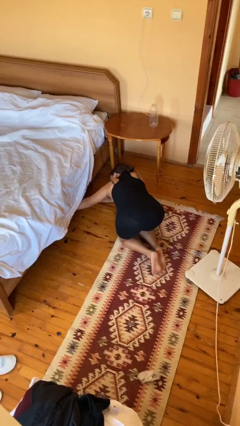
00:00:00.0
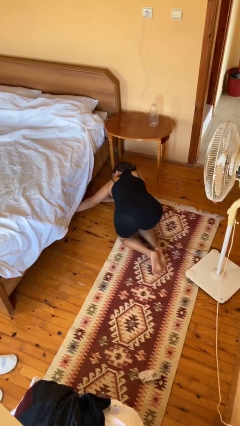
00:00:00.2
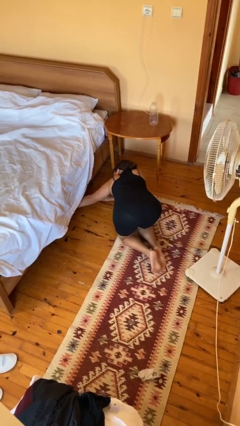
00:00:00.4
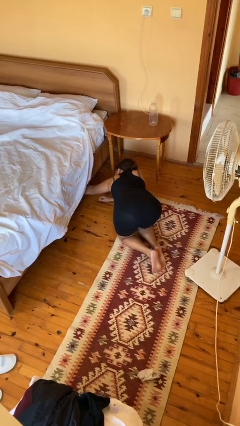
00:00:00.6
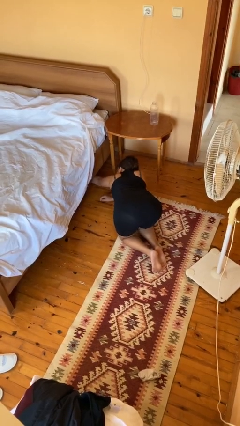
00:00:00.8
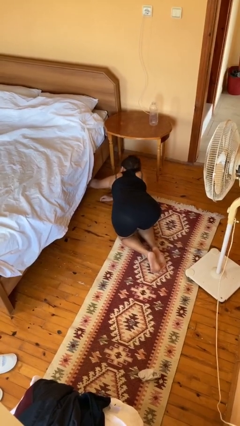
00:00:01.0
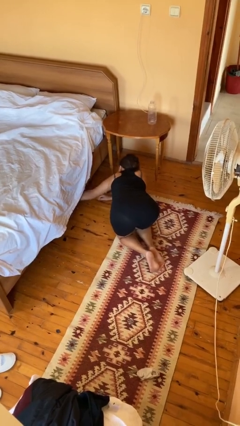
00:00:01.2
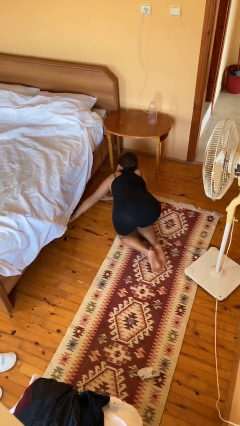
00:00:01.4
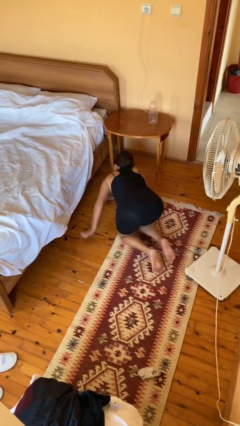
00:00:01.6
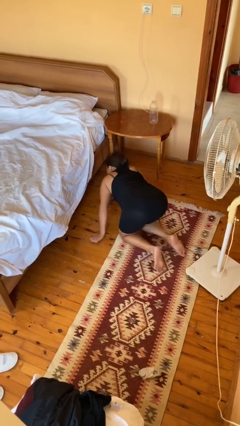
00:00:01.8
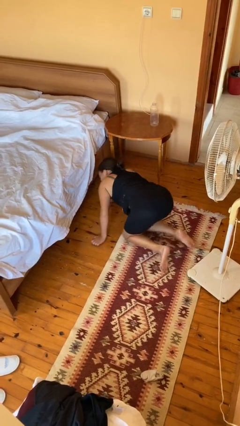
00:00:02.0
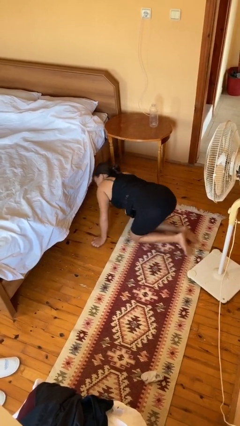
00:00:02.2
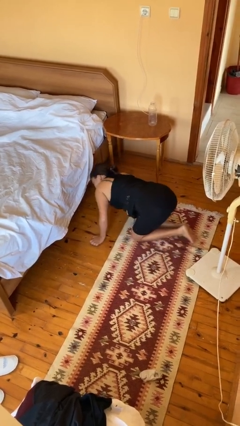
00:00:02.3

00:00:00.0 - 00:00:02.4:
person searches under bed

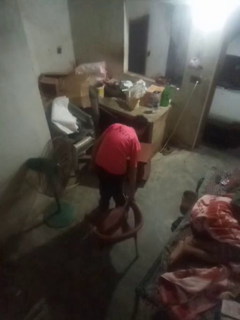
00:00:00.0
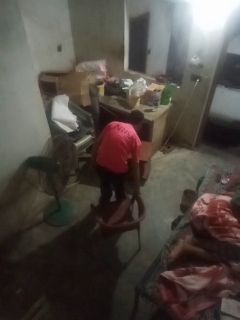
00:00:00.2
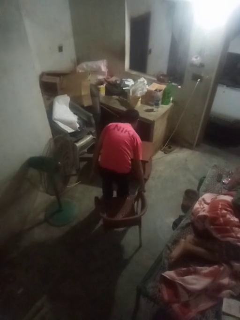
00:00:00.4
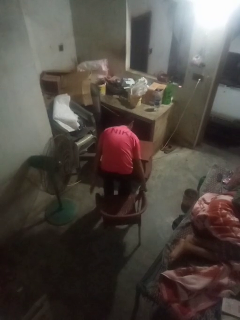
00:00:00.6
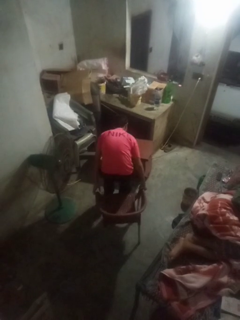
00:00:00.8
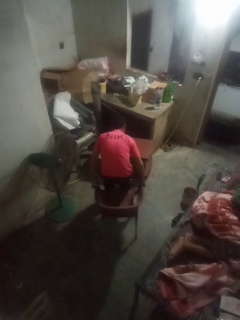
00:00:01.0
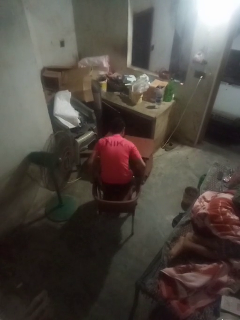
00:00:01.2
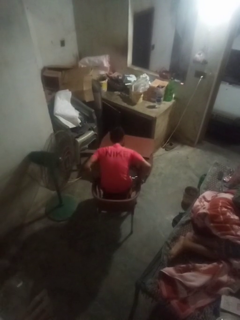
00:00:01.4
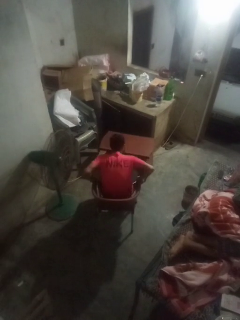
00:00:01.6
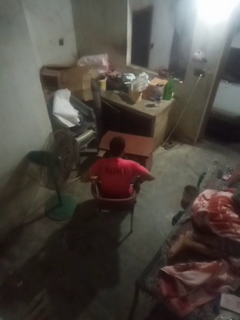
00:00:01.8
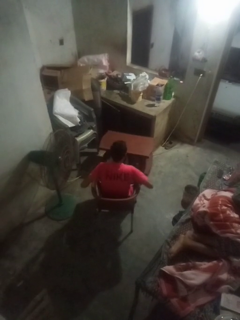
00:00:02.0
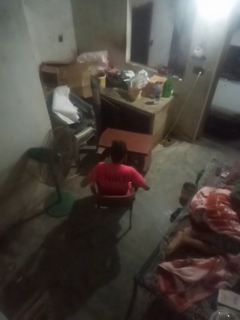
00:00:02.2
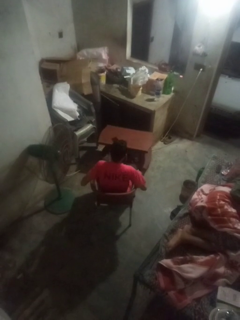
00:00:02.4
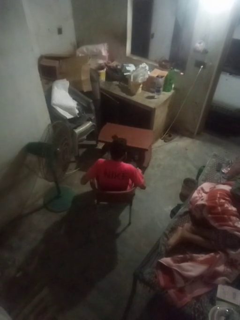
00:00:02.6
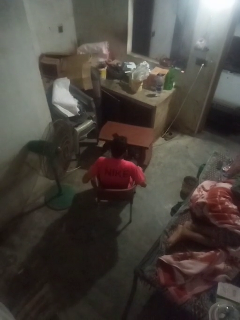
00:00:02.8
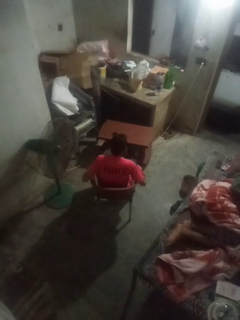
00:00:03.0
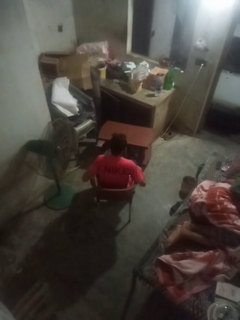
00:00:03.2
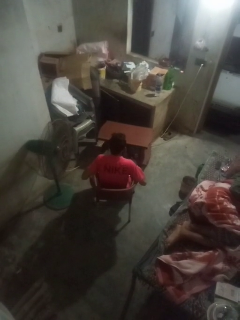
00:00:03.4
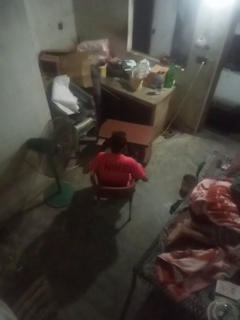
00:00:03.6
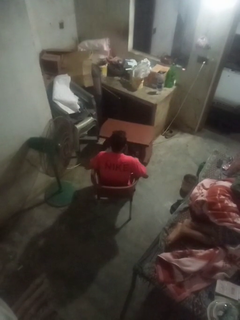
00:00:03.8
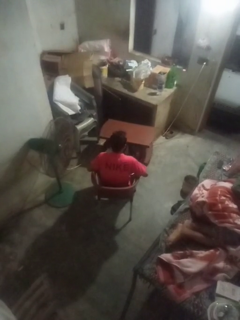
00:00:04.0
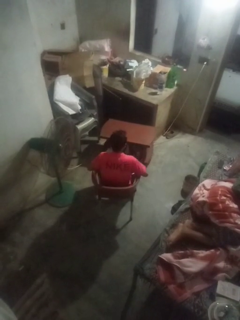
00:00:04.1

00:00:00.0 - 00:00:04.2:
person sits down

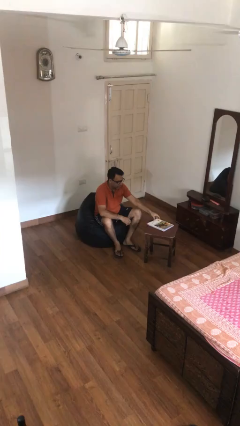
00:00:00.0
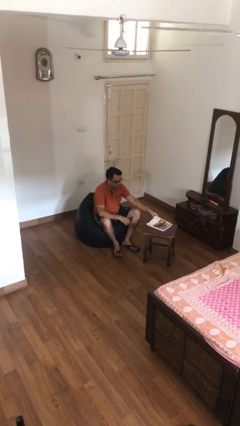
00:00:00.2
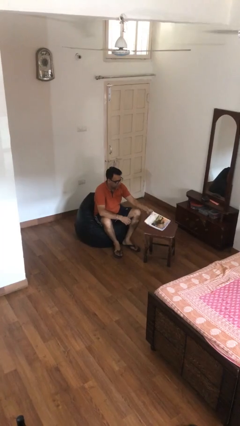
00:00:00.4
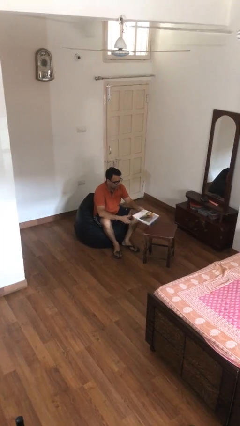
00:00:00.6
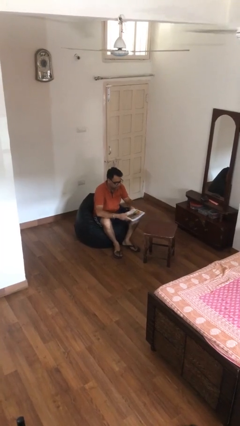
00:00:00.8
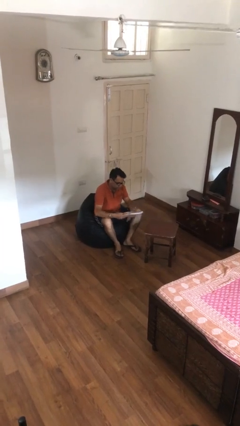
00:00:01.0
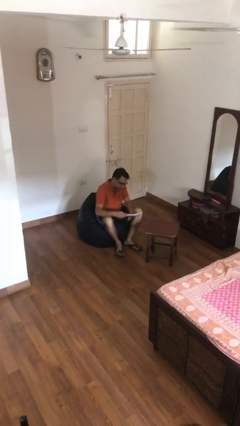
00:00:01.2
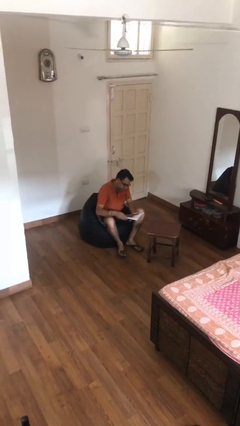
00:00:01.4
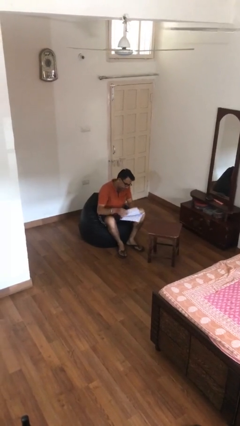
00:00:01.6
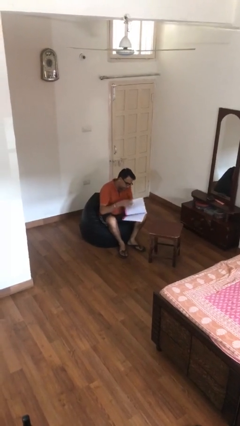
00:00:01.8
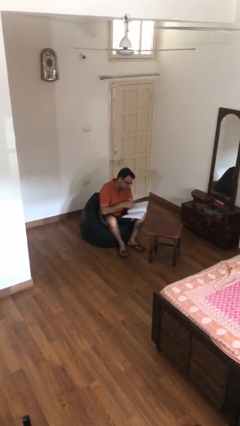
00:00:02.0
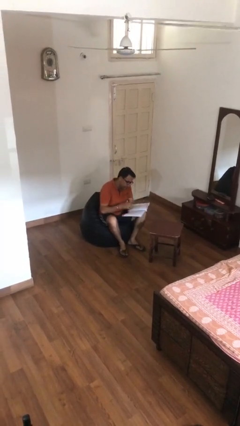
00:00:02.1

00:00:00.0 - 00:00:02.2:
person picks up object from table

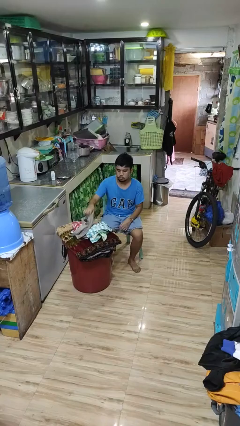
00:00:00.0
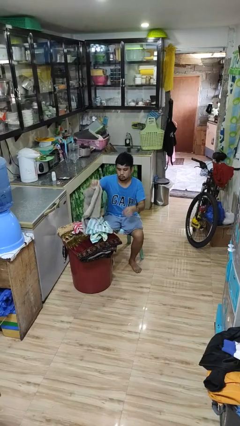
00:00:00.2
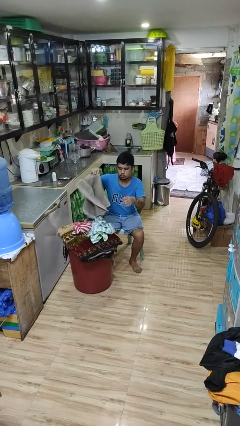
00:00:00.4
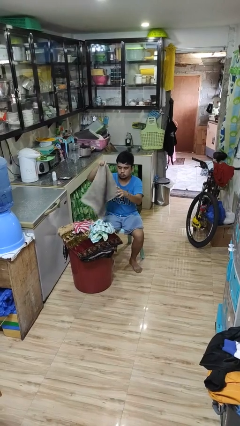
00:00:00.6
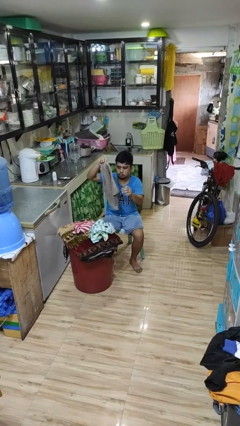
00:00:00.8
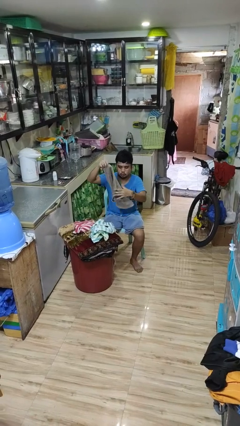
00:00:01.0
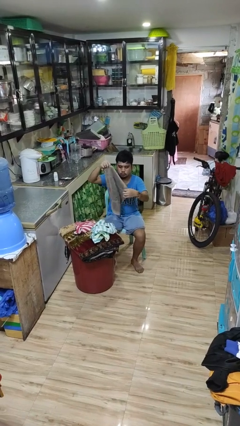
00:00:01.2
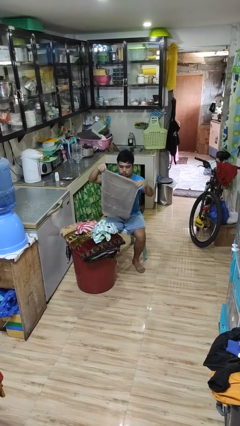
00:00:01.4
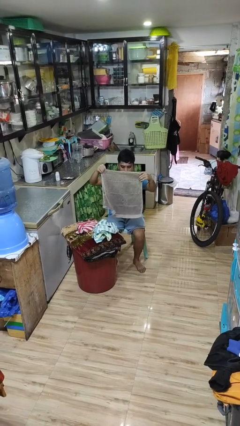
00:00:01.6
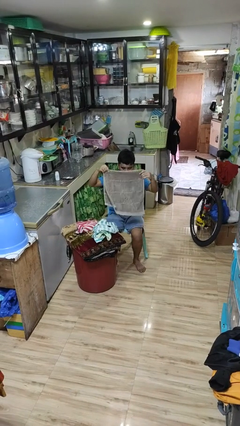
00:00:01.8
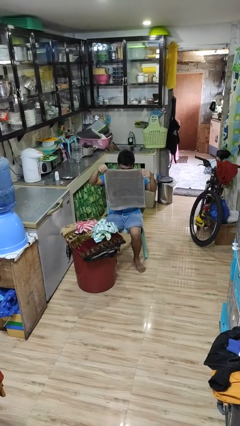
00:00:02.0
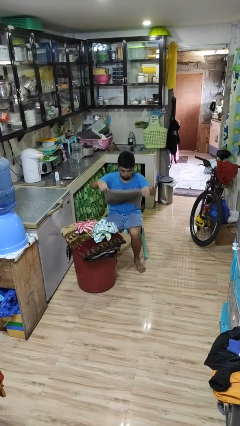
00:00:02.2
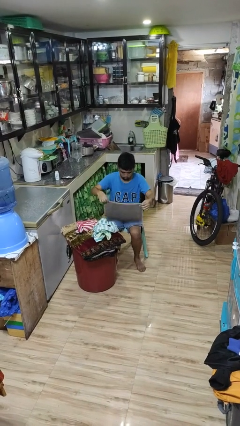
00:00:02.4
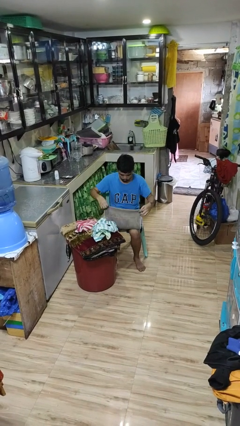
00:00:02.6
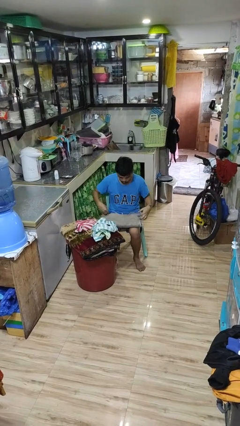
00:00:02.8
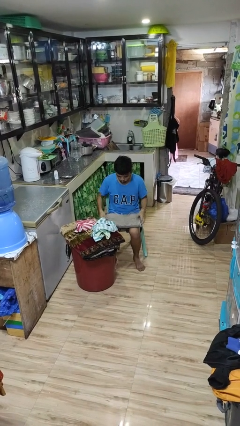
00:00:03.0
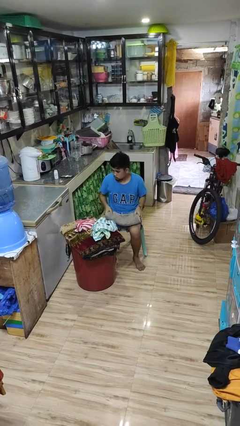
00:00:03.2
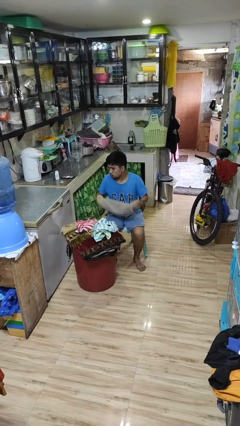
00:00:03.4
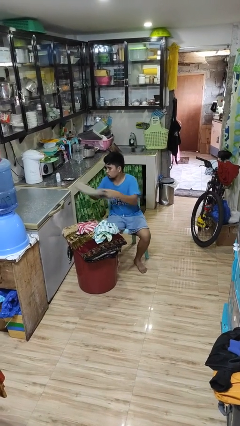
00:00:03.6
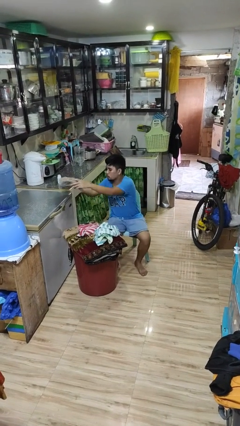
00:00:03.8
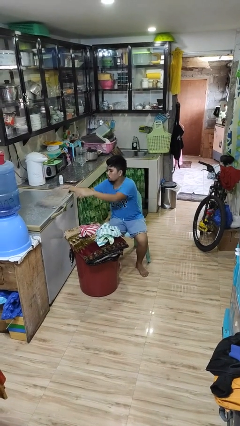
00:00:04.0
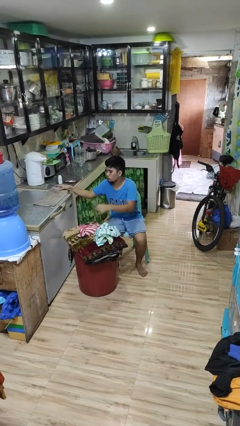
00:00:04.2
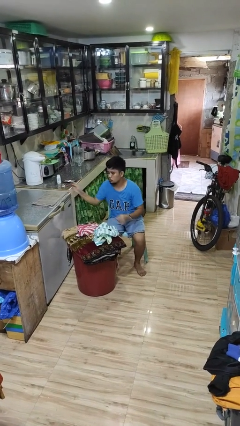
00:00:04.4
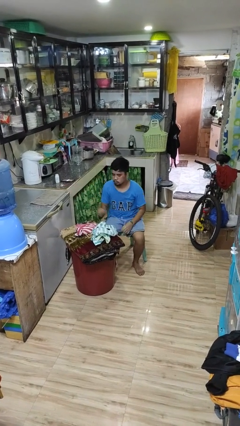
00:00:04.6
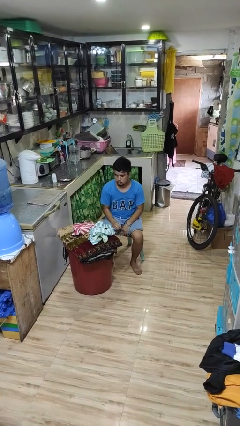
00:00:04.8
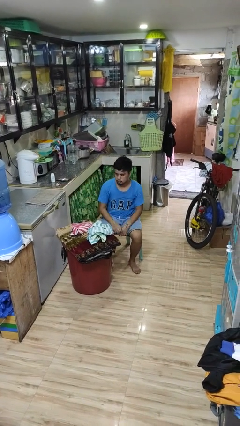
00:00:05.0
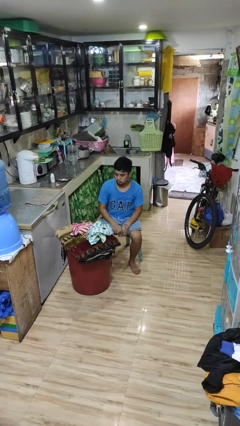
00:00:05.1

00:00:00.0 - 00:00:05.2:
person folds towel

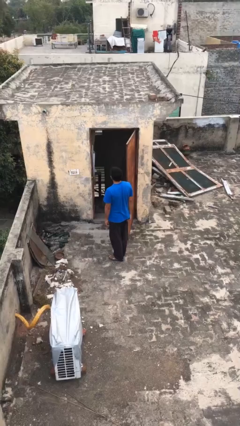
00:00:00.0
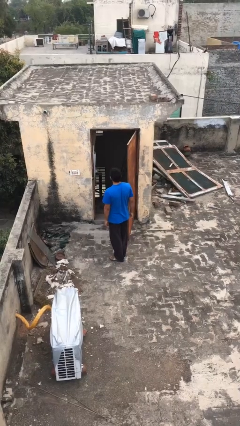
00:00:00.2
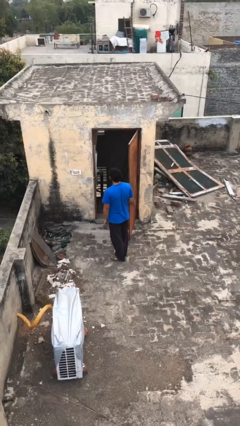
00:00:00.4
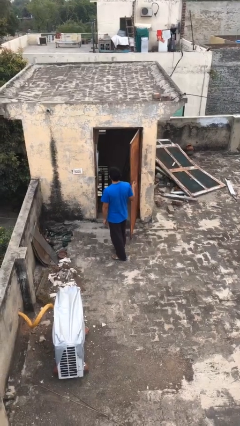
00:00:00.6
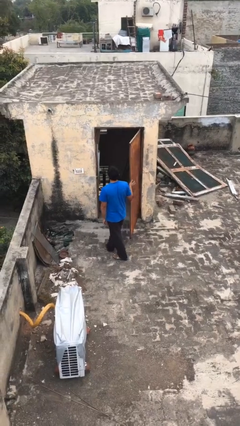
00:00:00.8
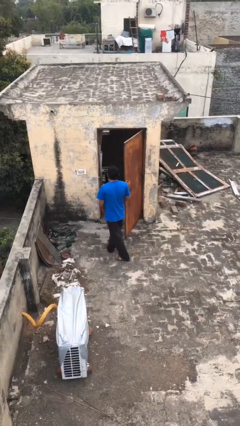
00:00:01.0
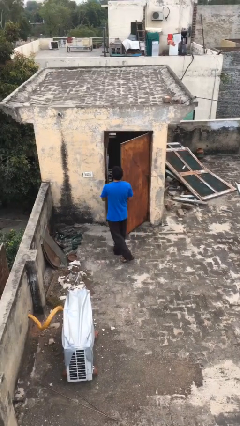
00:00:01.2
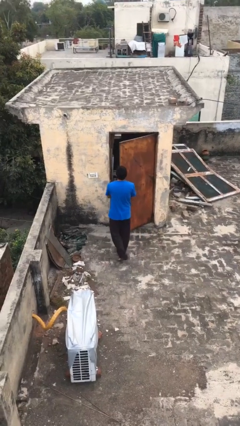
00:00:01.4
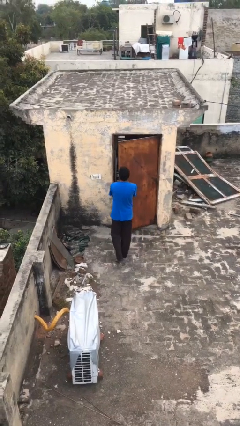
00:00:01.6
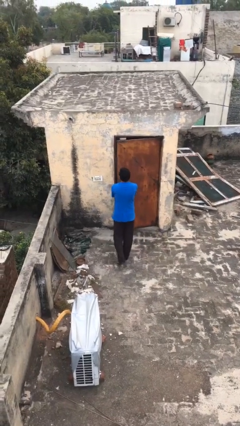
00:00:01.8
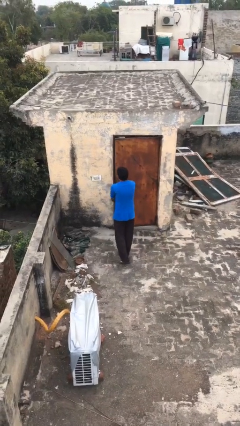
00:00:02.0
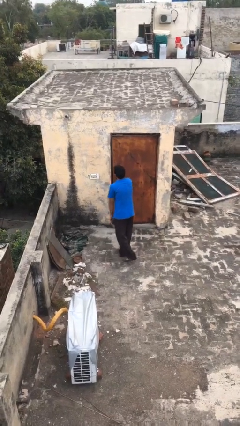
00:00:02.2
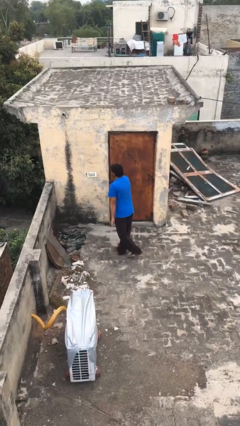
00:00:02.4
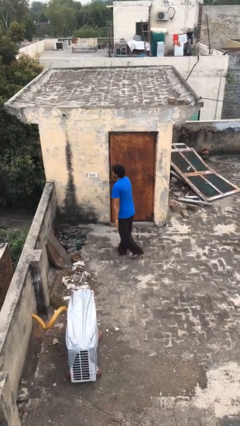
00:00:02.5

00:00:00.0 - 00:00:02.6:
person closes facility door

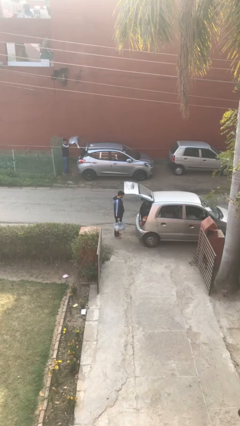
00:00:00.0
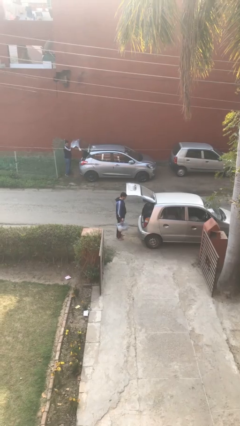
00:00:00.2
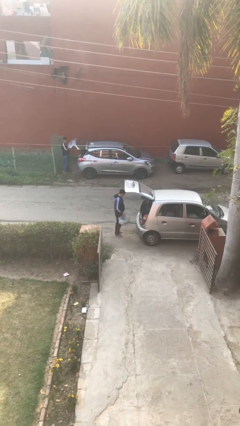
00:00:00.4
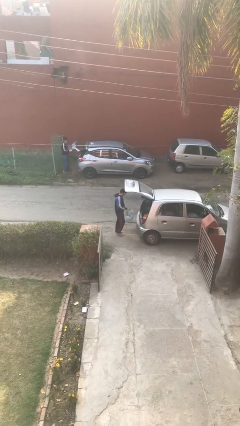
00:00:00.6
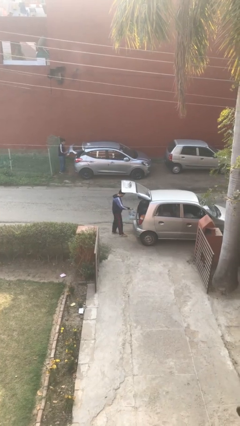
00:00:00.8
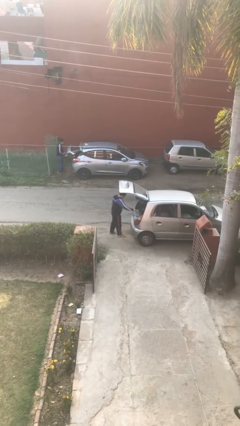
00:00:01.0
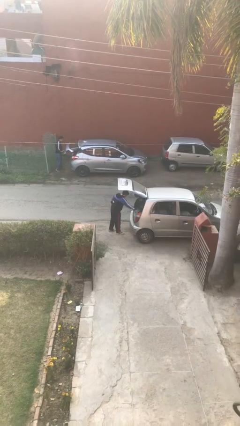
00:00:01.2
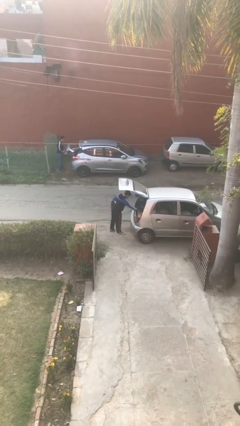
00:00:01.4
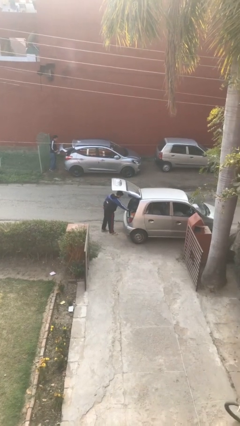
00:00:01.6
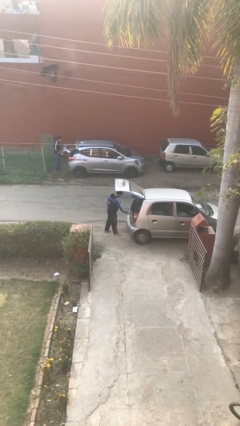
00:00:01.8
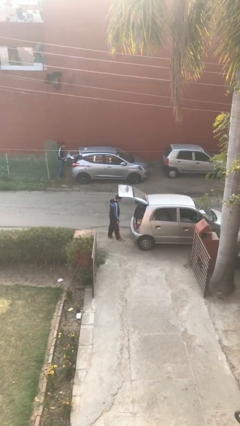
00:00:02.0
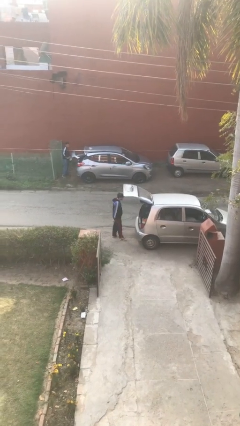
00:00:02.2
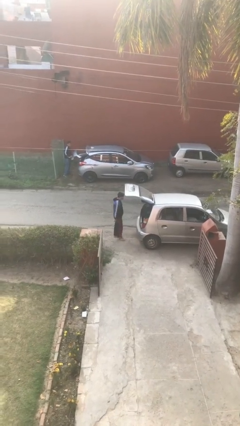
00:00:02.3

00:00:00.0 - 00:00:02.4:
person loads car
